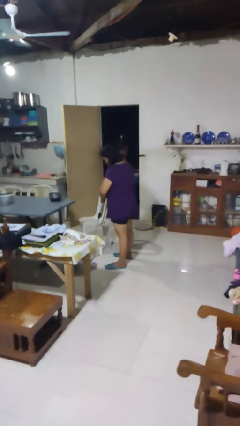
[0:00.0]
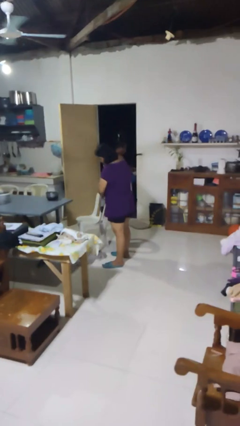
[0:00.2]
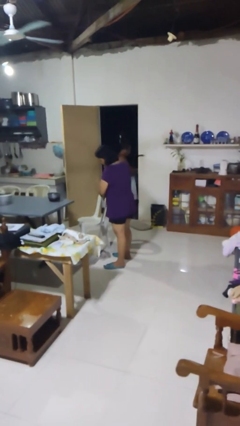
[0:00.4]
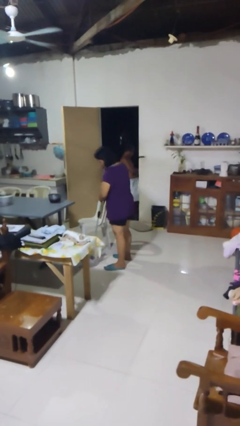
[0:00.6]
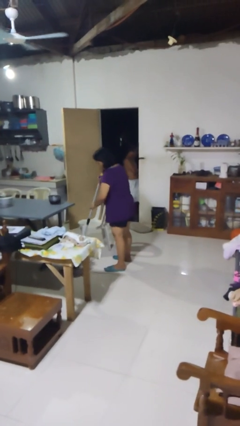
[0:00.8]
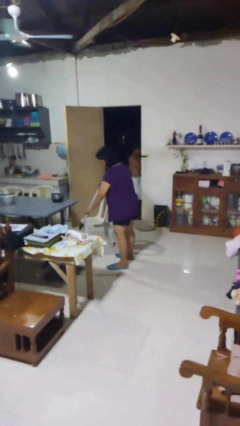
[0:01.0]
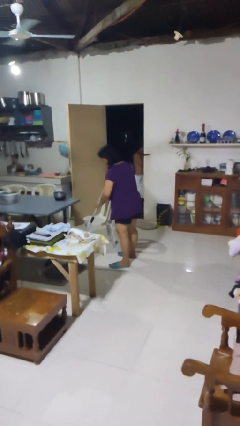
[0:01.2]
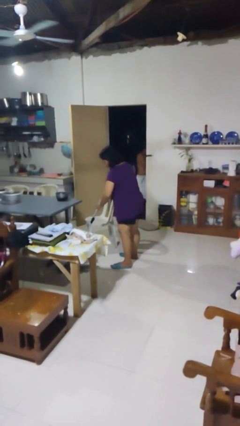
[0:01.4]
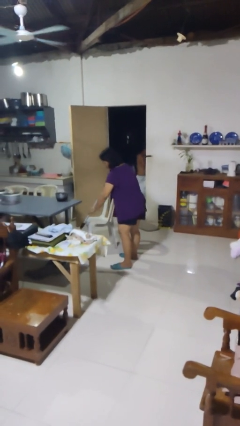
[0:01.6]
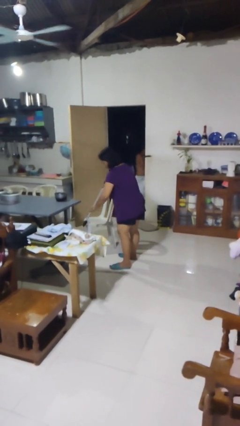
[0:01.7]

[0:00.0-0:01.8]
person mops

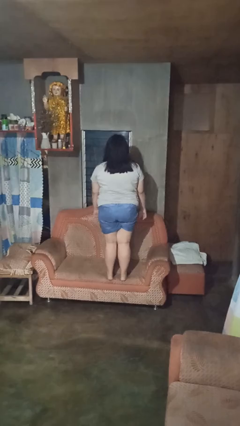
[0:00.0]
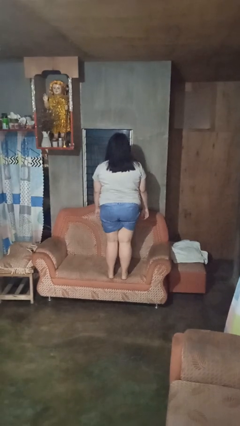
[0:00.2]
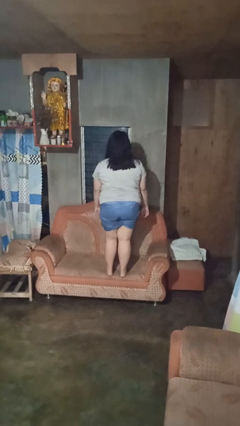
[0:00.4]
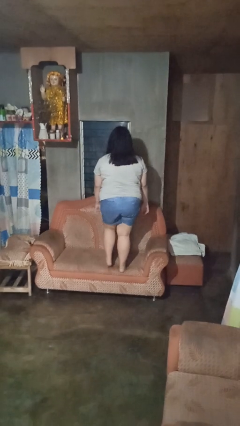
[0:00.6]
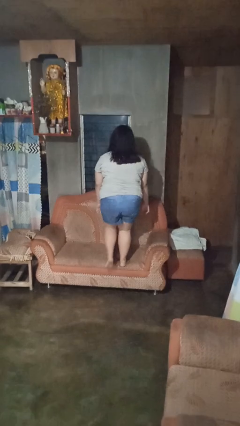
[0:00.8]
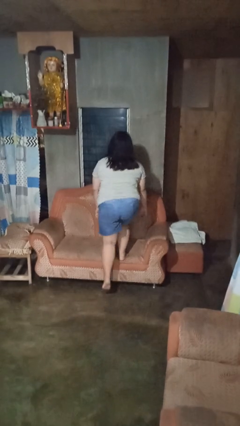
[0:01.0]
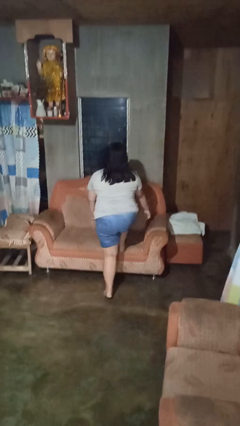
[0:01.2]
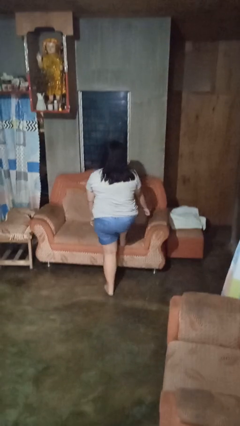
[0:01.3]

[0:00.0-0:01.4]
person climbs off couch

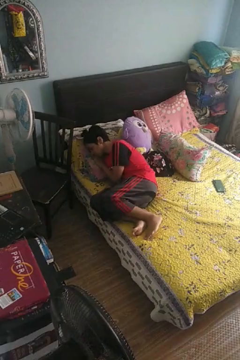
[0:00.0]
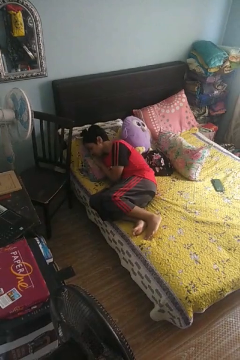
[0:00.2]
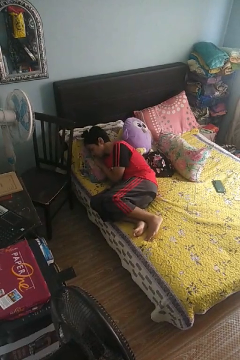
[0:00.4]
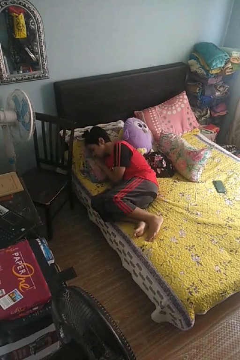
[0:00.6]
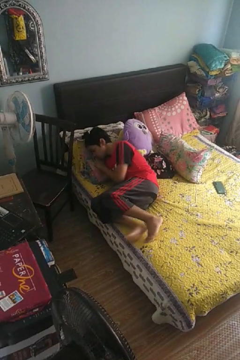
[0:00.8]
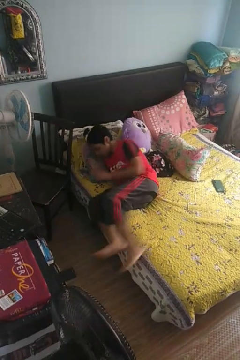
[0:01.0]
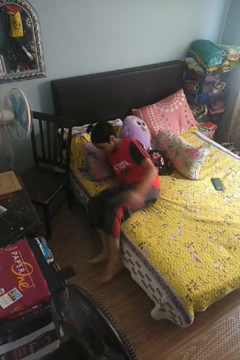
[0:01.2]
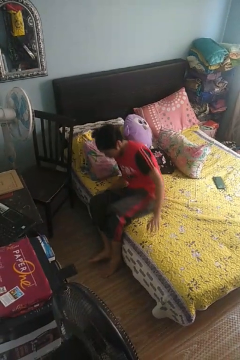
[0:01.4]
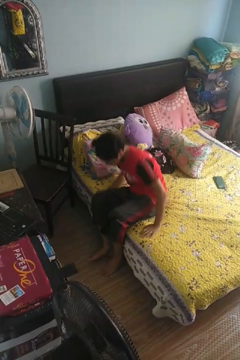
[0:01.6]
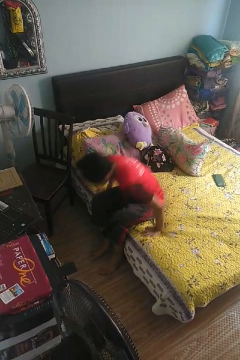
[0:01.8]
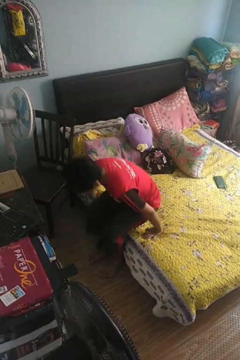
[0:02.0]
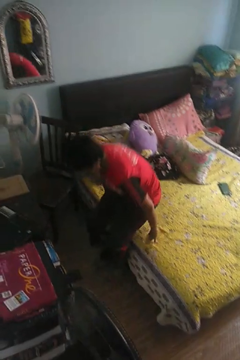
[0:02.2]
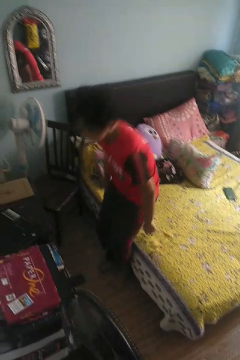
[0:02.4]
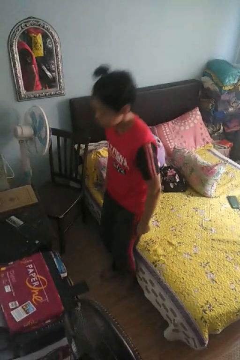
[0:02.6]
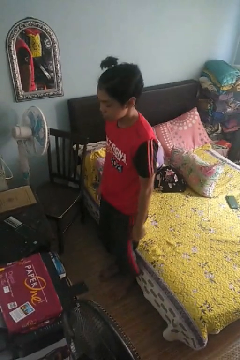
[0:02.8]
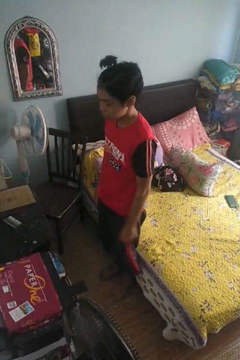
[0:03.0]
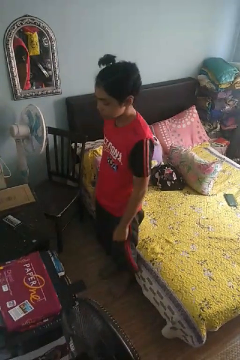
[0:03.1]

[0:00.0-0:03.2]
person stands up

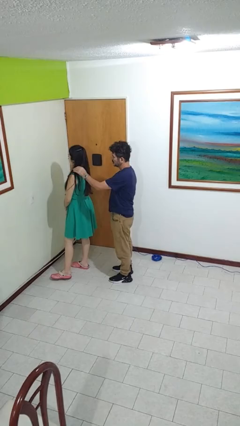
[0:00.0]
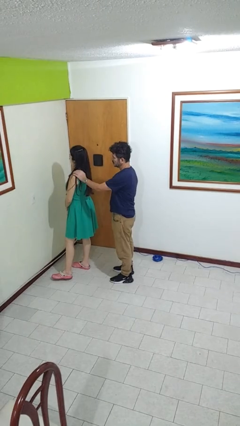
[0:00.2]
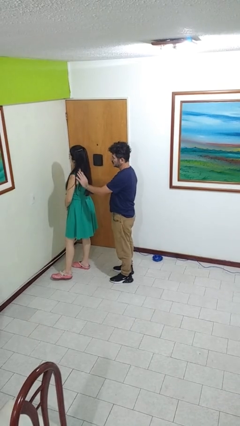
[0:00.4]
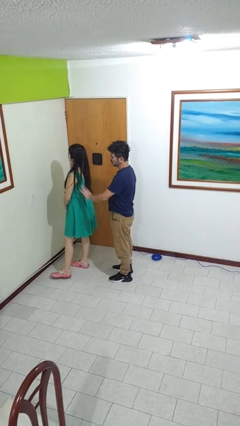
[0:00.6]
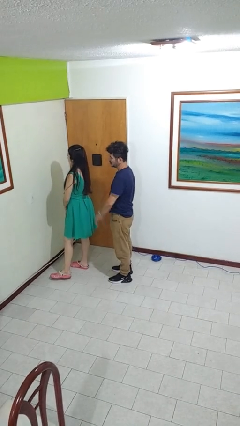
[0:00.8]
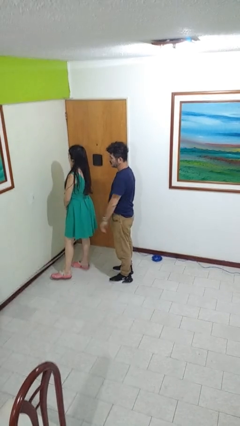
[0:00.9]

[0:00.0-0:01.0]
person touches back of person

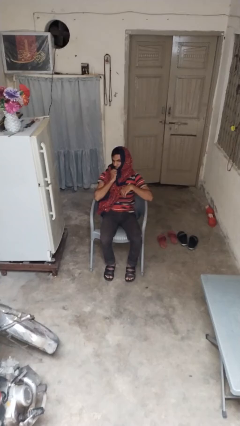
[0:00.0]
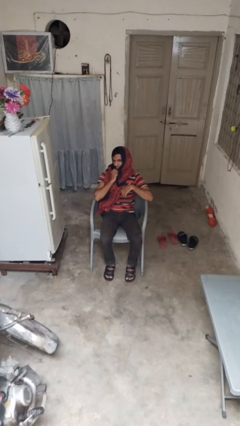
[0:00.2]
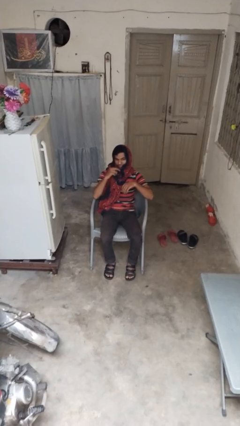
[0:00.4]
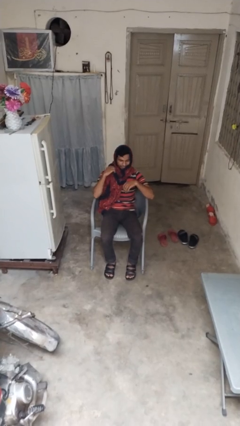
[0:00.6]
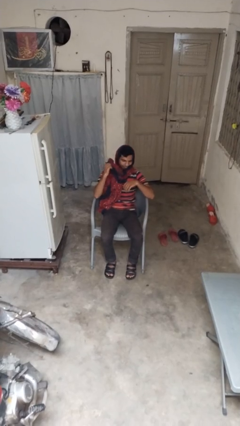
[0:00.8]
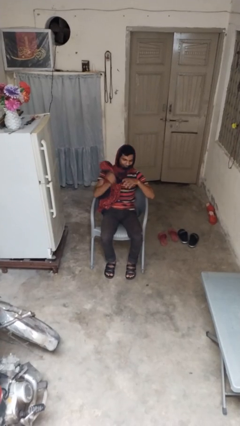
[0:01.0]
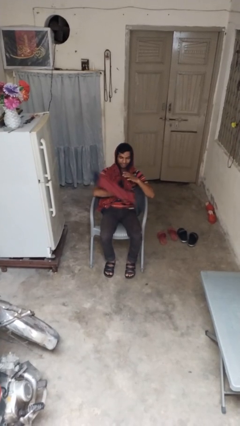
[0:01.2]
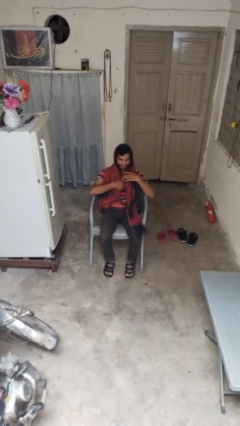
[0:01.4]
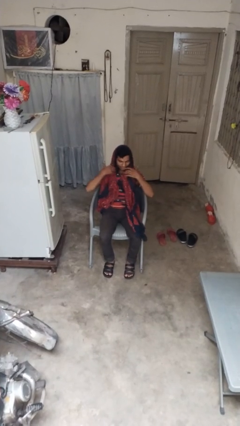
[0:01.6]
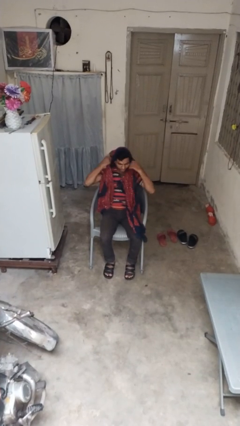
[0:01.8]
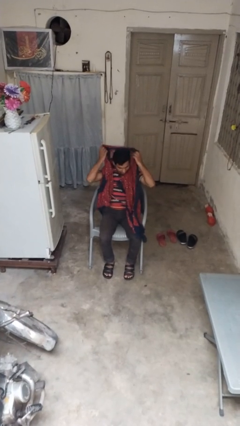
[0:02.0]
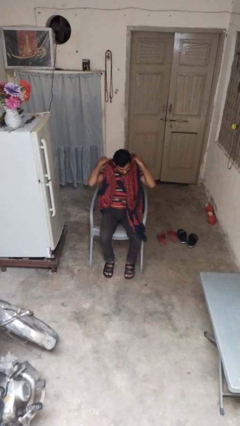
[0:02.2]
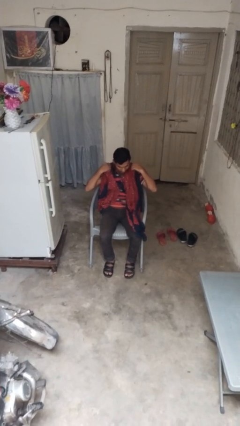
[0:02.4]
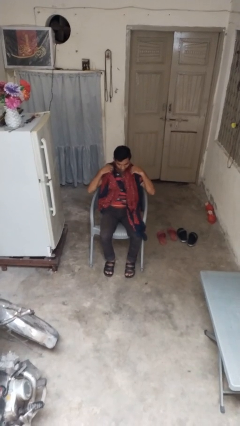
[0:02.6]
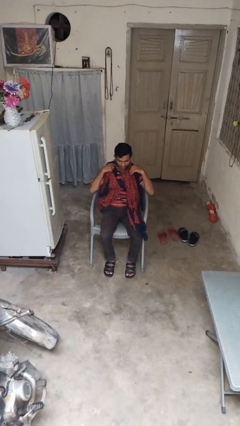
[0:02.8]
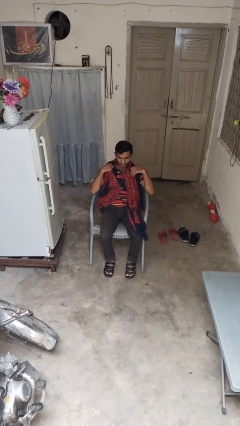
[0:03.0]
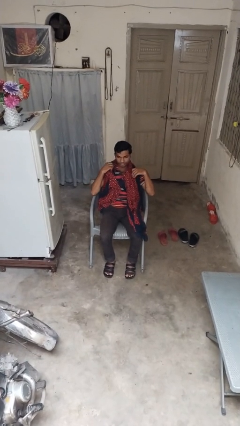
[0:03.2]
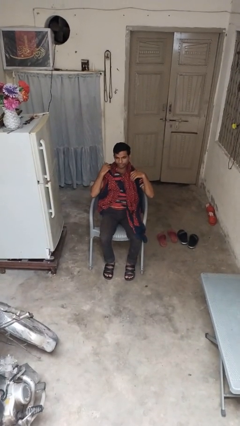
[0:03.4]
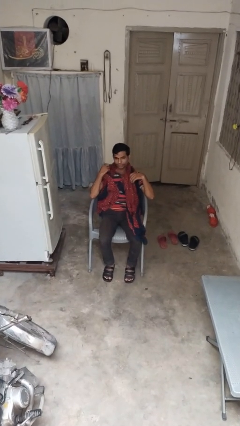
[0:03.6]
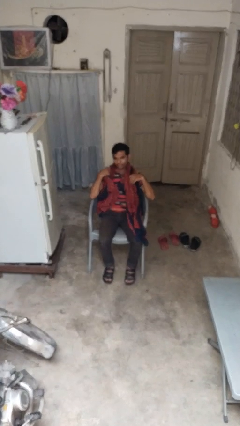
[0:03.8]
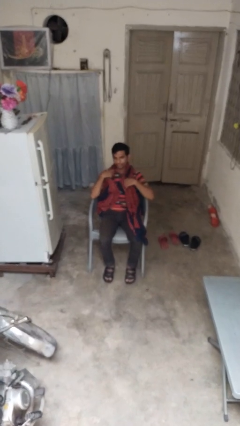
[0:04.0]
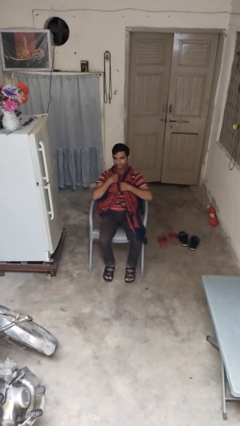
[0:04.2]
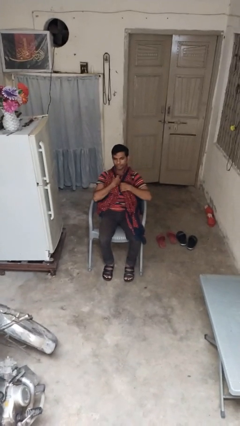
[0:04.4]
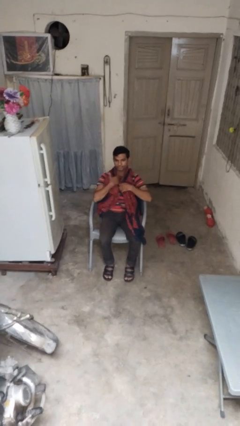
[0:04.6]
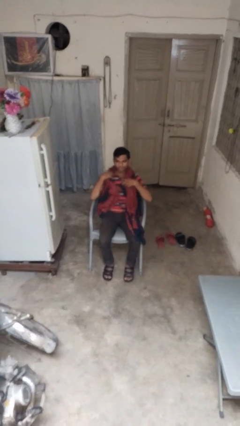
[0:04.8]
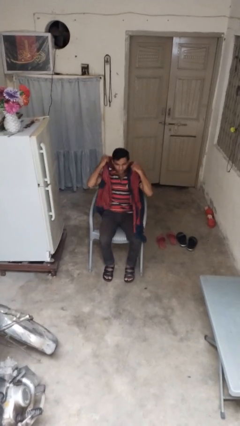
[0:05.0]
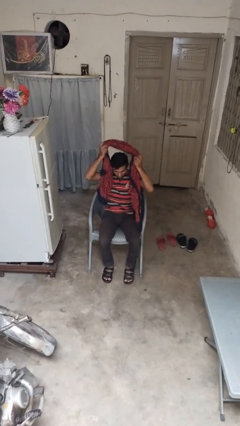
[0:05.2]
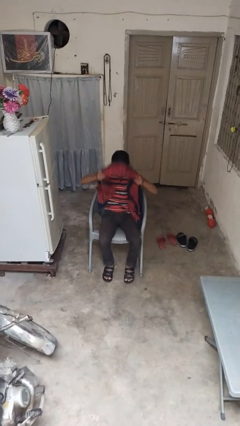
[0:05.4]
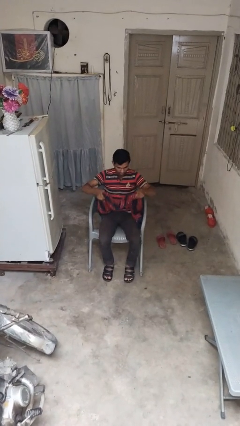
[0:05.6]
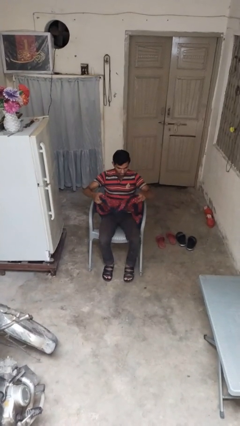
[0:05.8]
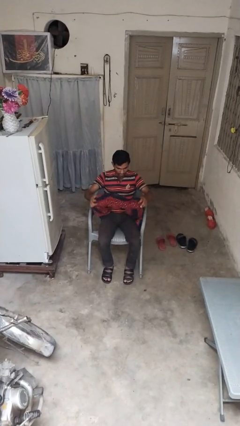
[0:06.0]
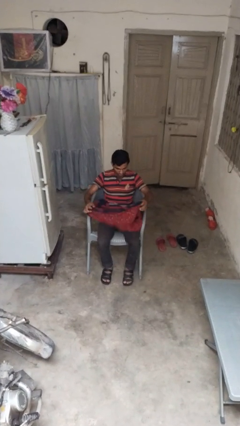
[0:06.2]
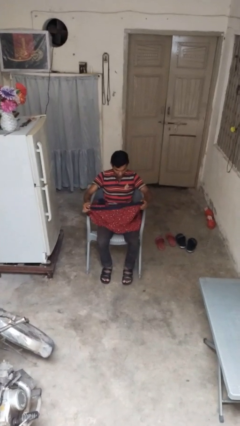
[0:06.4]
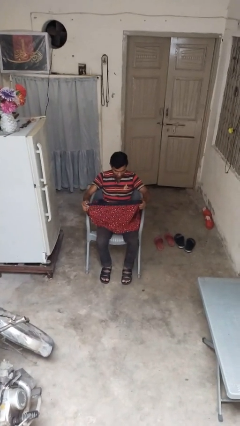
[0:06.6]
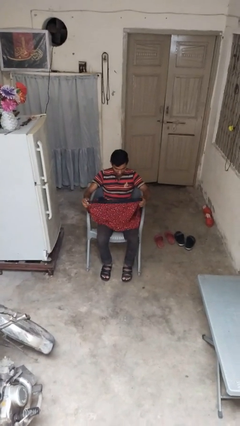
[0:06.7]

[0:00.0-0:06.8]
person takes off scarf

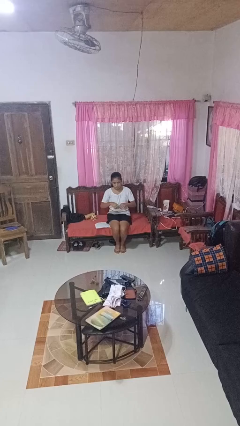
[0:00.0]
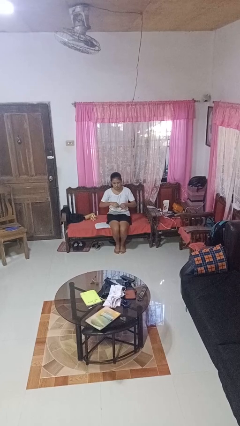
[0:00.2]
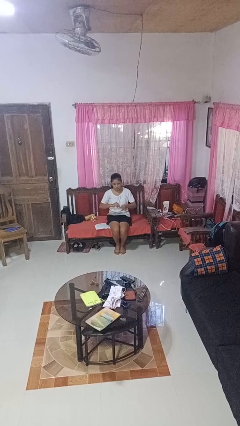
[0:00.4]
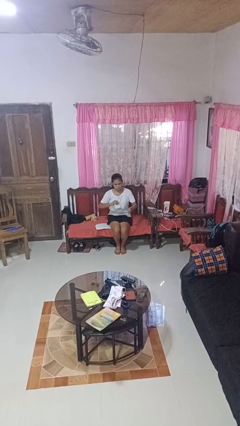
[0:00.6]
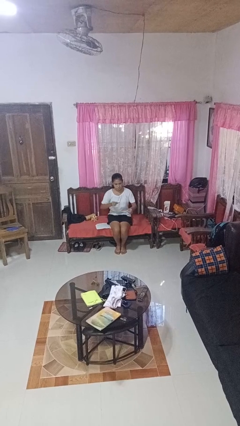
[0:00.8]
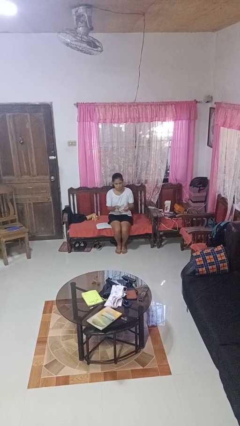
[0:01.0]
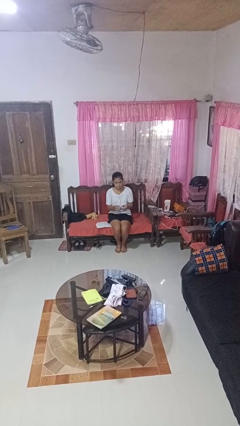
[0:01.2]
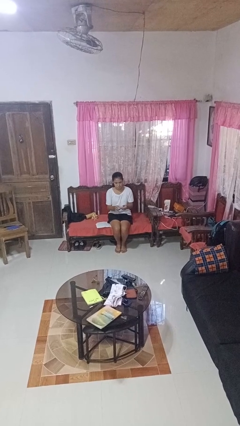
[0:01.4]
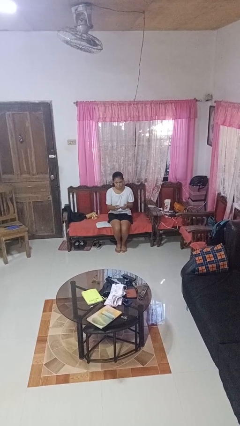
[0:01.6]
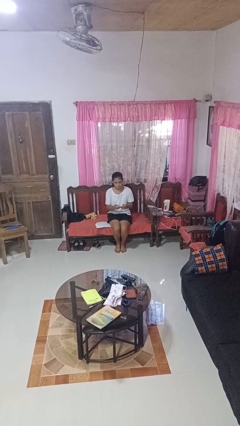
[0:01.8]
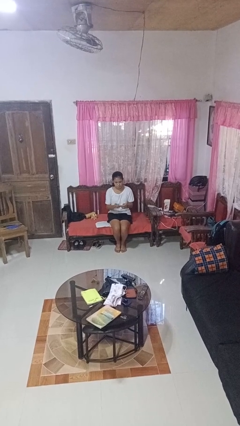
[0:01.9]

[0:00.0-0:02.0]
person tears paper

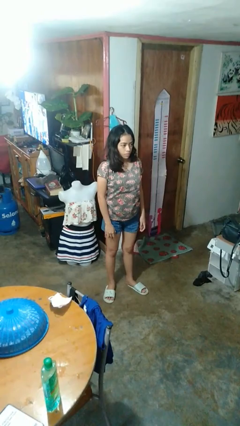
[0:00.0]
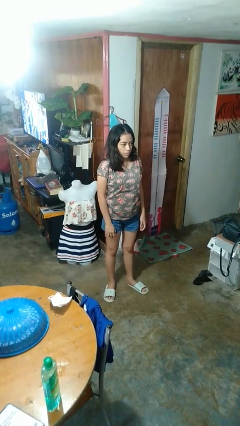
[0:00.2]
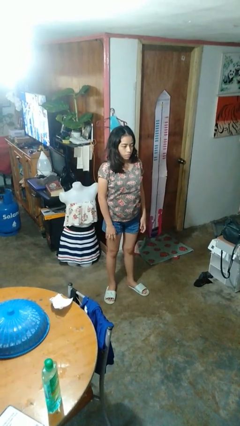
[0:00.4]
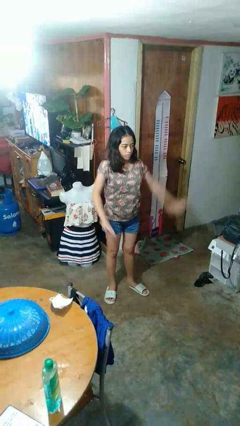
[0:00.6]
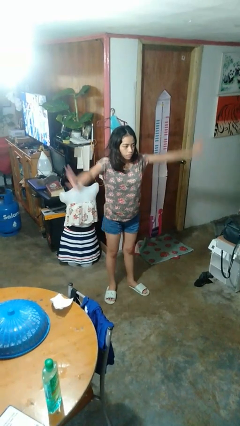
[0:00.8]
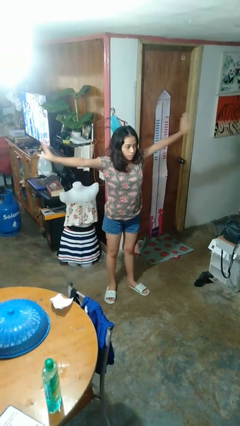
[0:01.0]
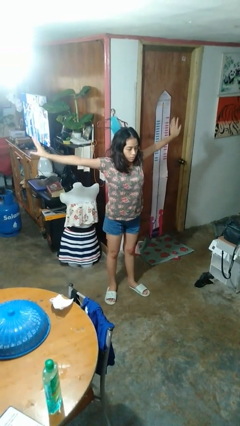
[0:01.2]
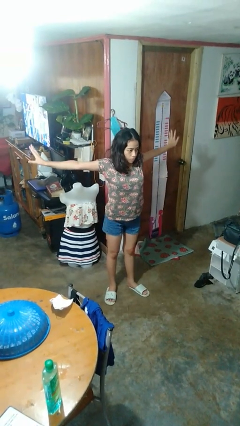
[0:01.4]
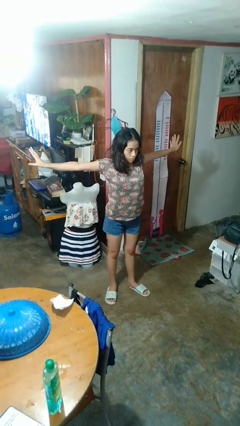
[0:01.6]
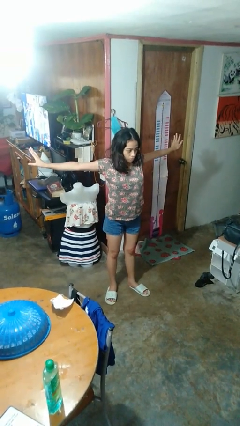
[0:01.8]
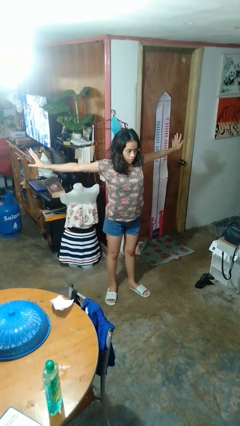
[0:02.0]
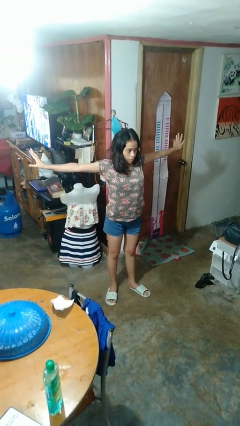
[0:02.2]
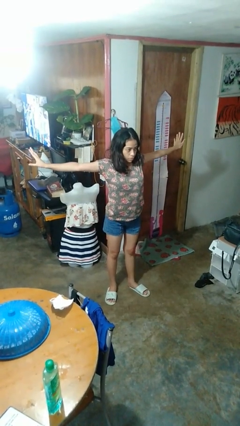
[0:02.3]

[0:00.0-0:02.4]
person stretches arms to side
